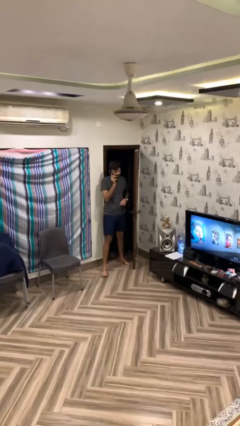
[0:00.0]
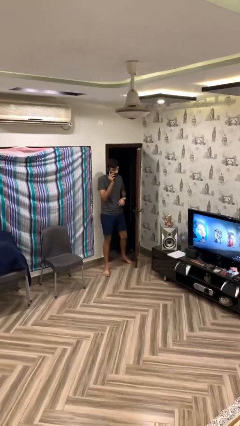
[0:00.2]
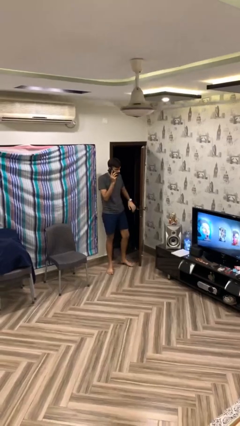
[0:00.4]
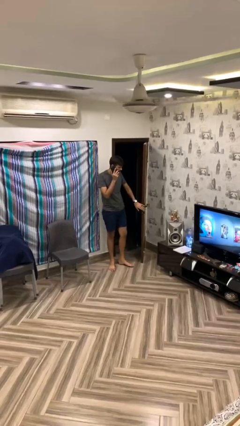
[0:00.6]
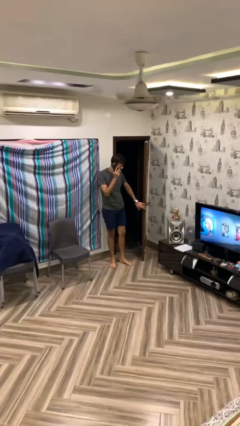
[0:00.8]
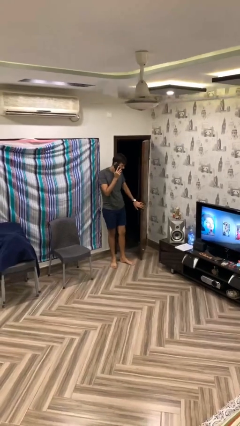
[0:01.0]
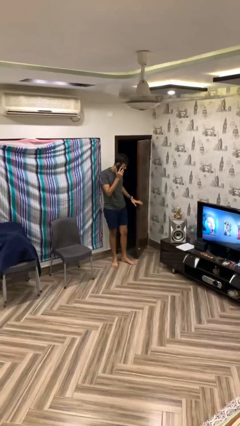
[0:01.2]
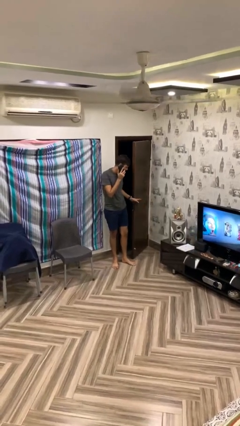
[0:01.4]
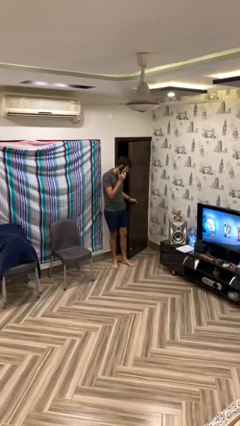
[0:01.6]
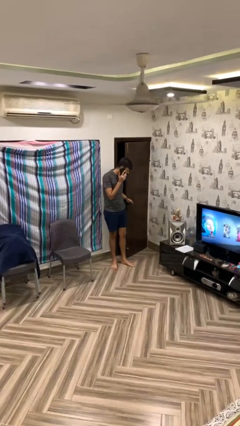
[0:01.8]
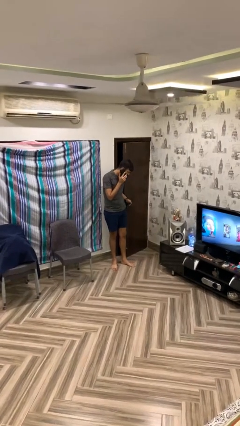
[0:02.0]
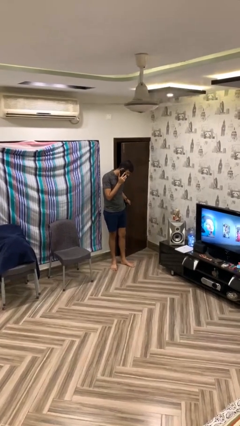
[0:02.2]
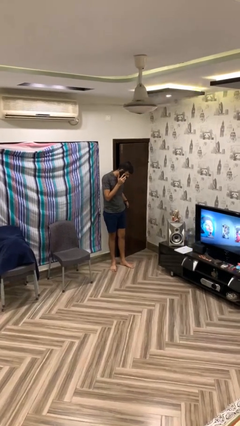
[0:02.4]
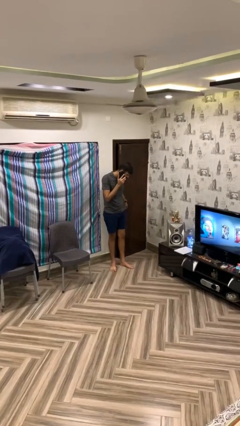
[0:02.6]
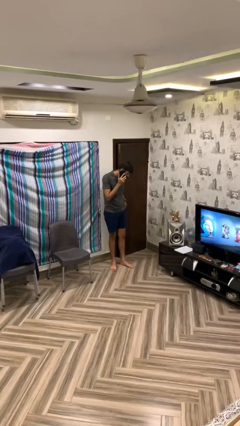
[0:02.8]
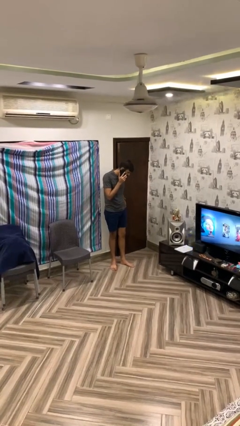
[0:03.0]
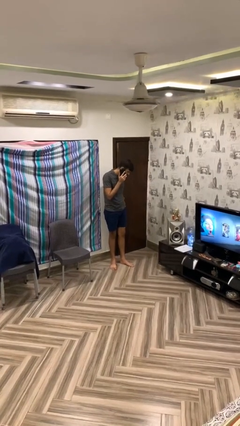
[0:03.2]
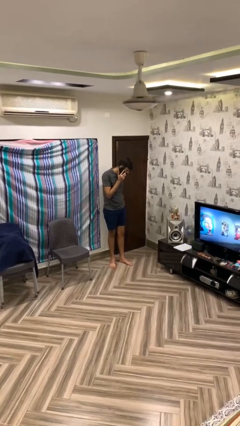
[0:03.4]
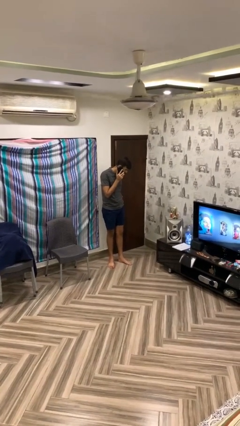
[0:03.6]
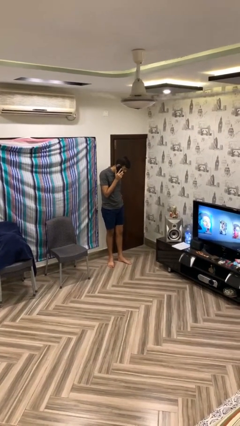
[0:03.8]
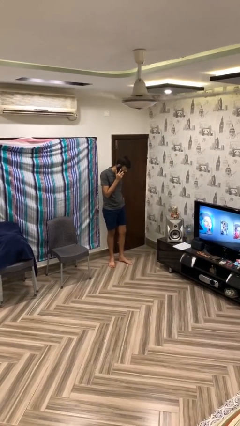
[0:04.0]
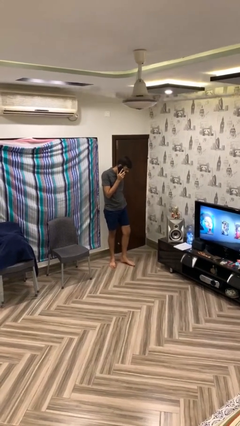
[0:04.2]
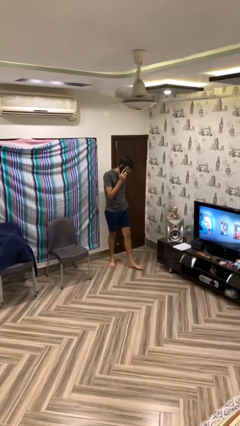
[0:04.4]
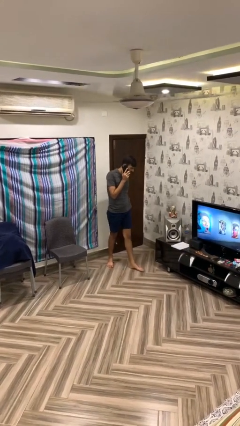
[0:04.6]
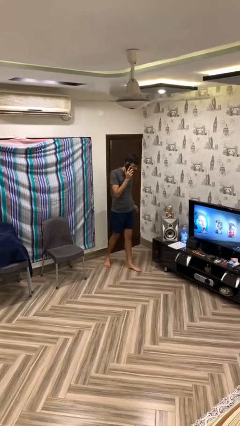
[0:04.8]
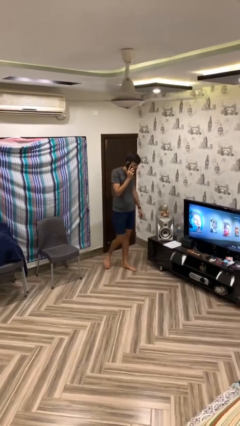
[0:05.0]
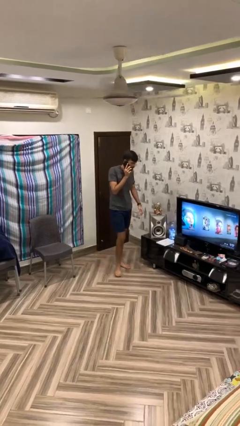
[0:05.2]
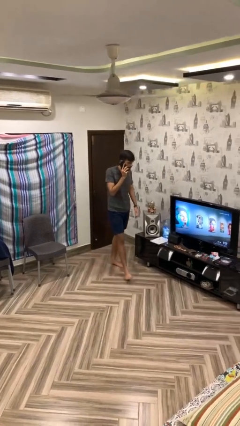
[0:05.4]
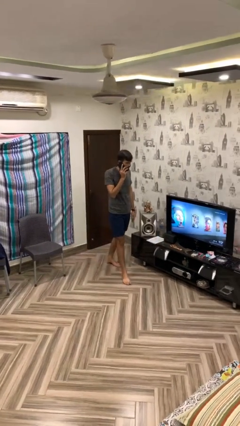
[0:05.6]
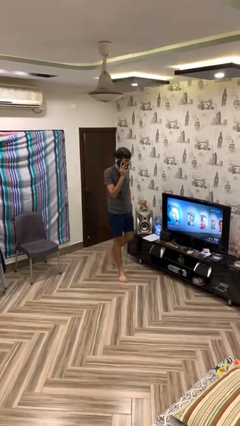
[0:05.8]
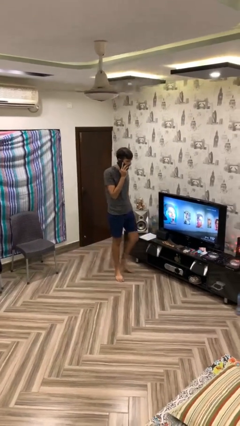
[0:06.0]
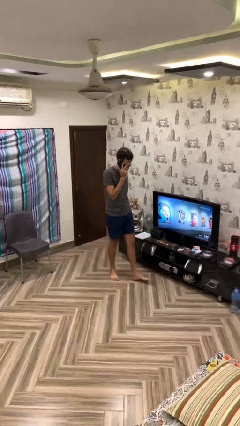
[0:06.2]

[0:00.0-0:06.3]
person closes facility door

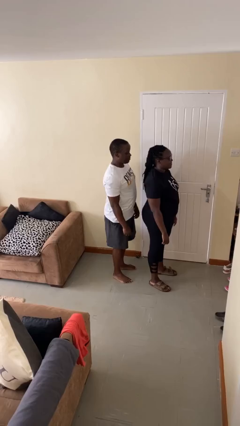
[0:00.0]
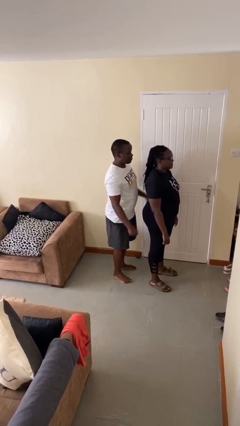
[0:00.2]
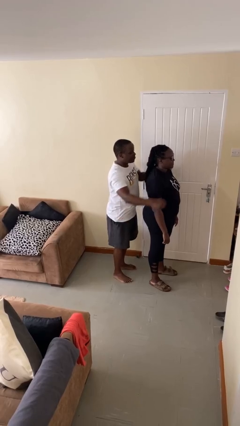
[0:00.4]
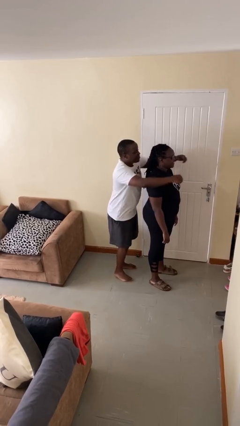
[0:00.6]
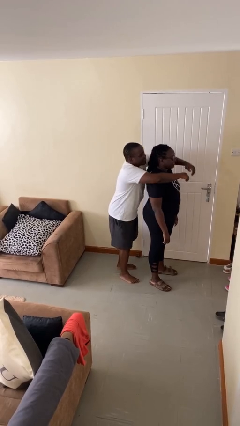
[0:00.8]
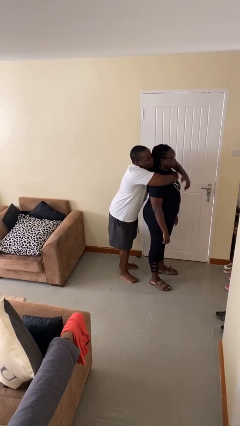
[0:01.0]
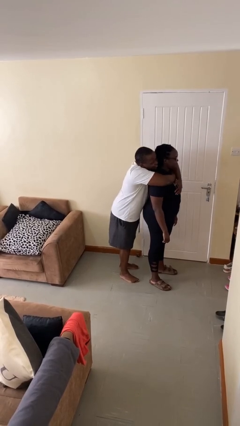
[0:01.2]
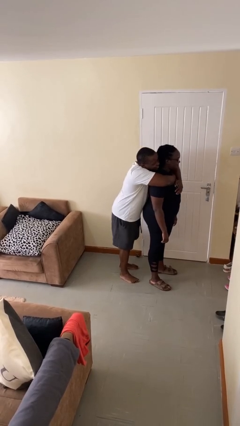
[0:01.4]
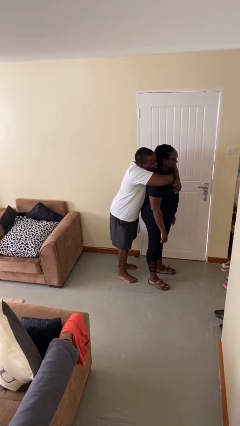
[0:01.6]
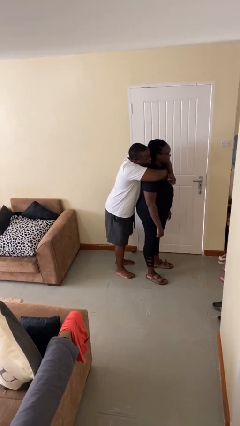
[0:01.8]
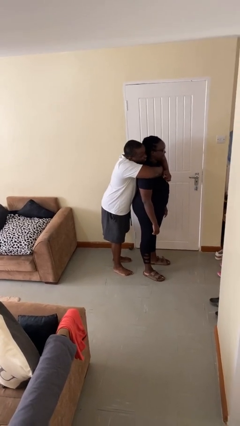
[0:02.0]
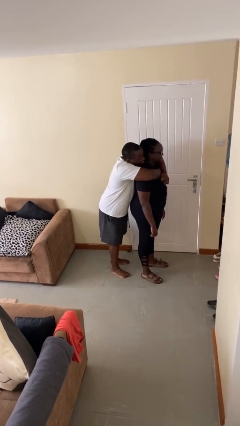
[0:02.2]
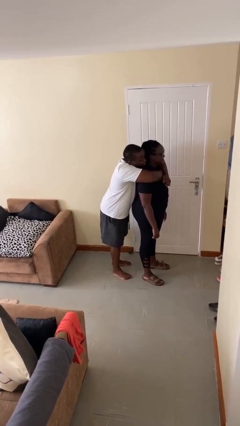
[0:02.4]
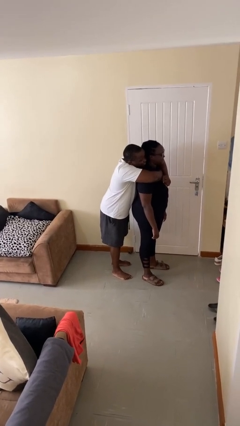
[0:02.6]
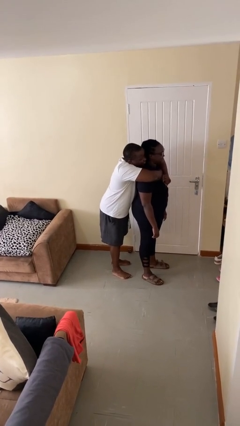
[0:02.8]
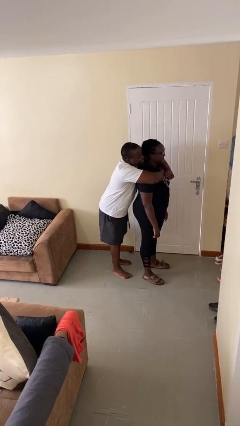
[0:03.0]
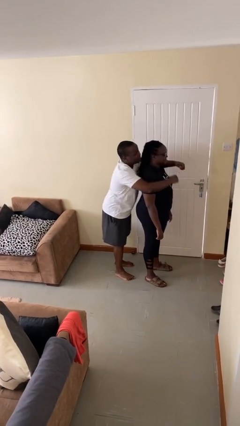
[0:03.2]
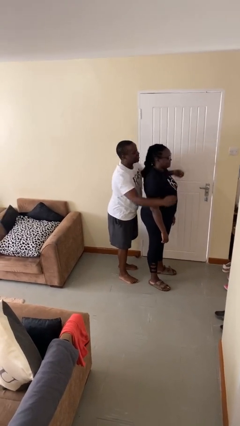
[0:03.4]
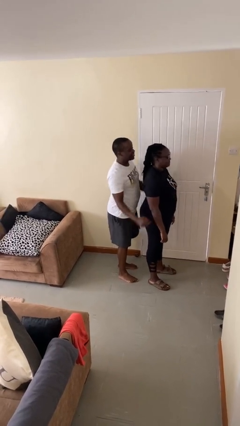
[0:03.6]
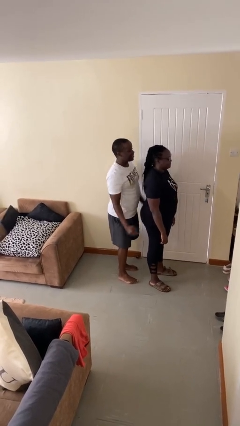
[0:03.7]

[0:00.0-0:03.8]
person hugs person from behind

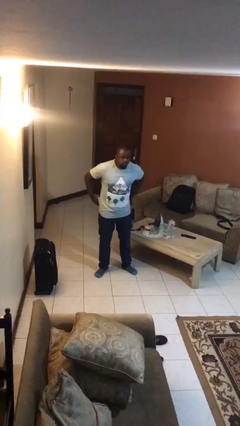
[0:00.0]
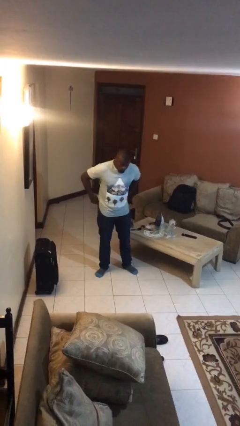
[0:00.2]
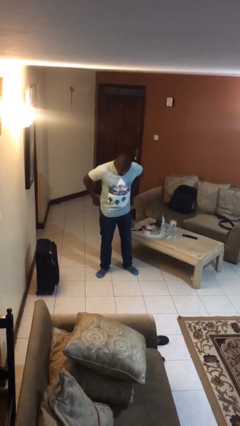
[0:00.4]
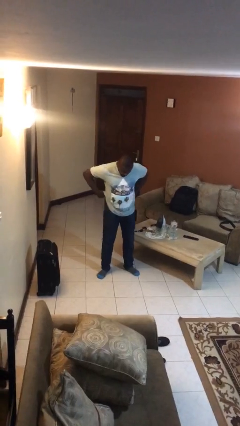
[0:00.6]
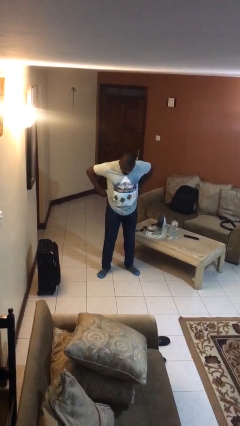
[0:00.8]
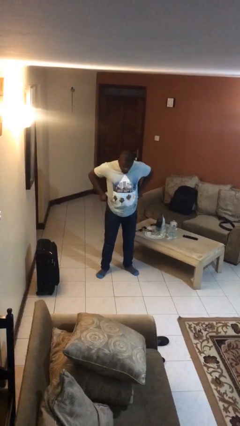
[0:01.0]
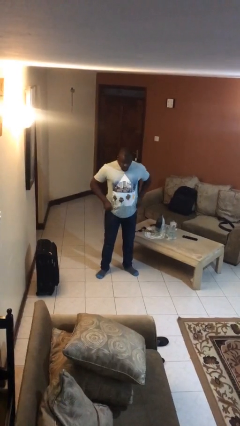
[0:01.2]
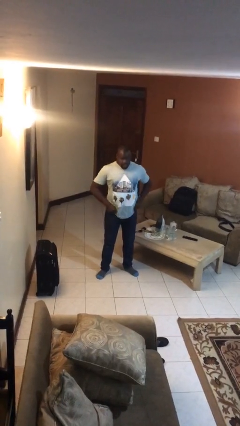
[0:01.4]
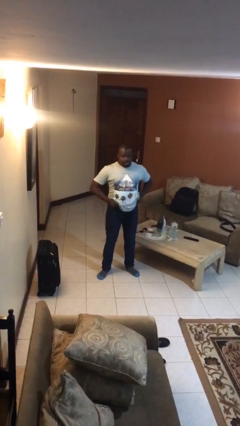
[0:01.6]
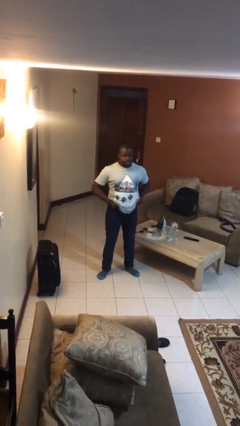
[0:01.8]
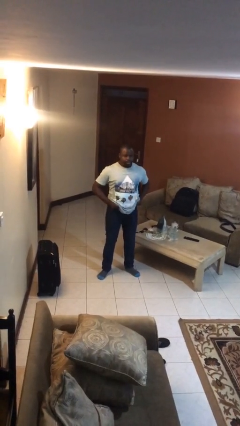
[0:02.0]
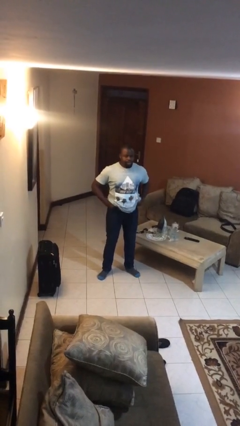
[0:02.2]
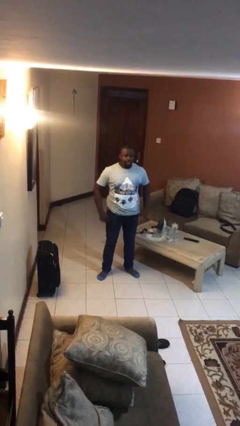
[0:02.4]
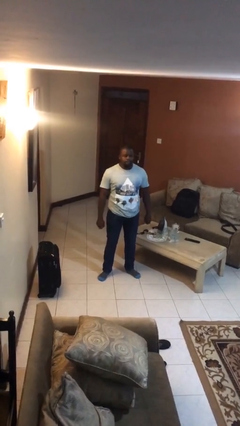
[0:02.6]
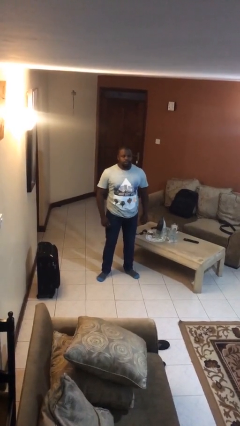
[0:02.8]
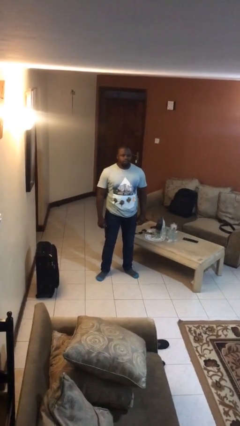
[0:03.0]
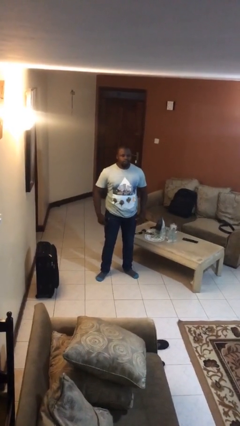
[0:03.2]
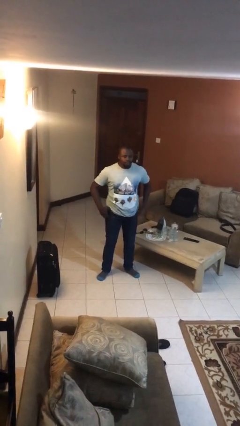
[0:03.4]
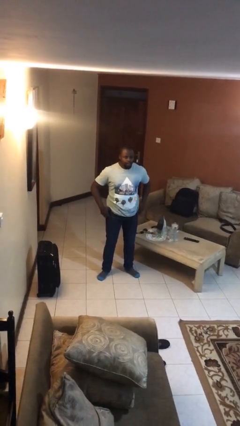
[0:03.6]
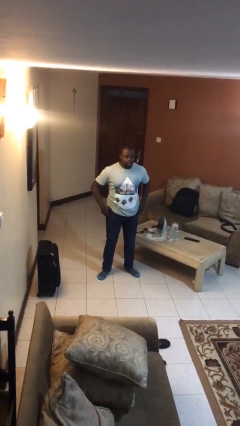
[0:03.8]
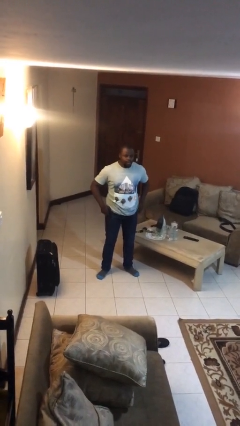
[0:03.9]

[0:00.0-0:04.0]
person hikes up pants

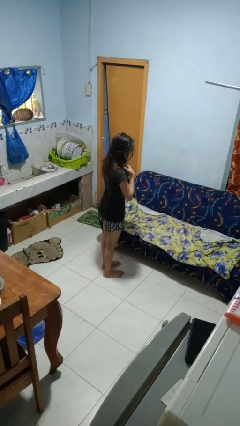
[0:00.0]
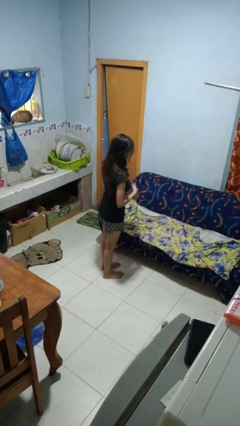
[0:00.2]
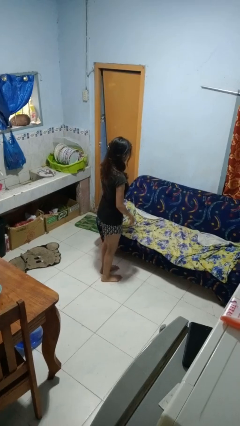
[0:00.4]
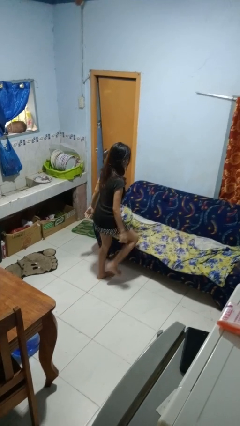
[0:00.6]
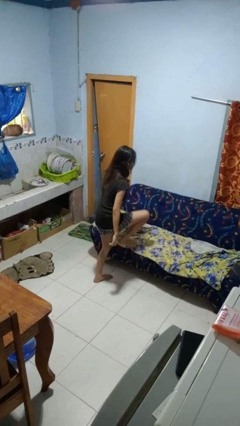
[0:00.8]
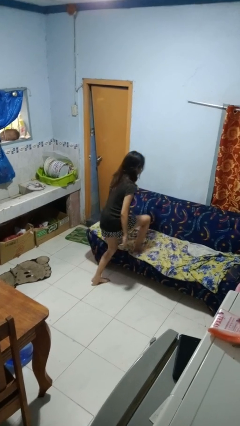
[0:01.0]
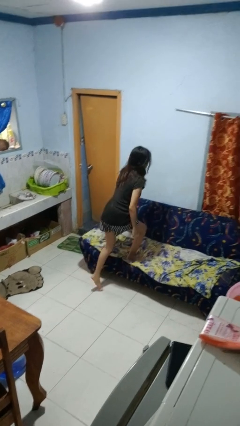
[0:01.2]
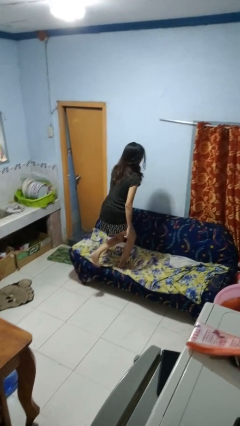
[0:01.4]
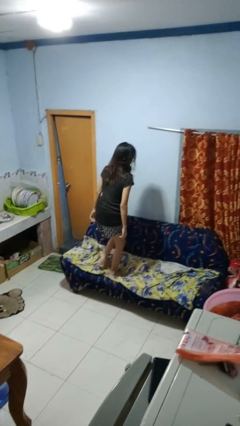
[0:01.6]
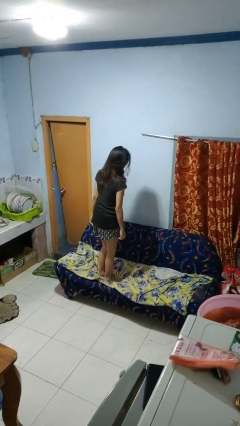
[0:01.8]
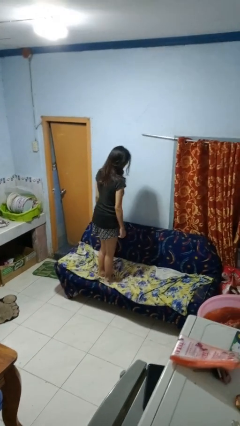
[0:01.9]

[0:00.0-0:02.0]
person climbs on couch

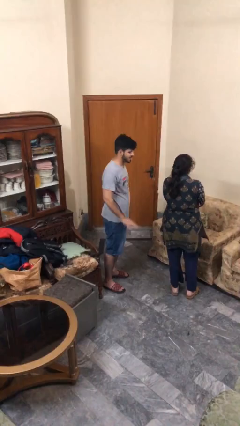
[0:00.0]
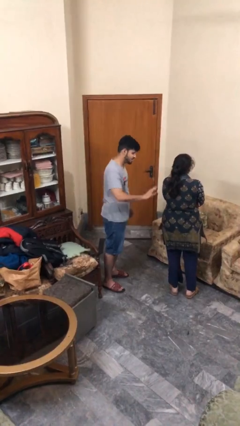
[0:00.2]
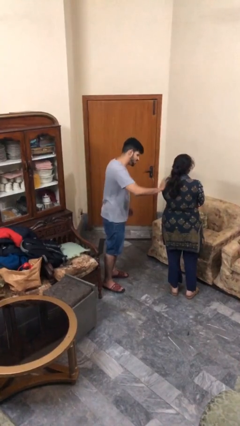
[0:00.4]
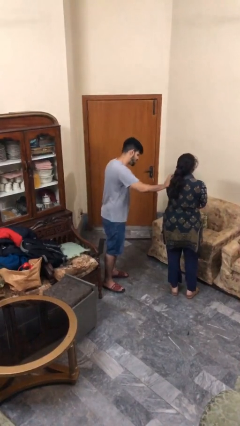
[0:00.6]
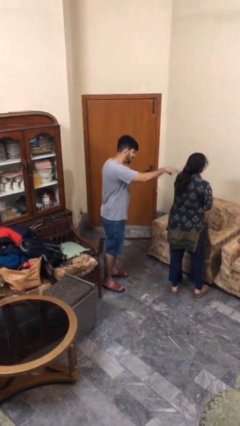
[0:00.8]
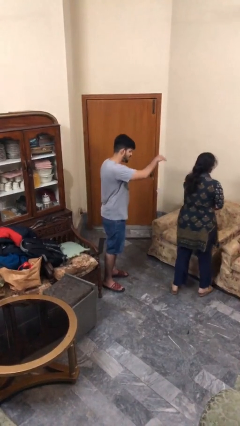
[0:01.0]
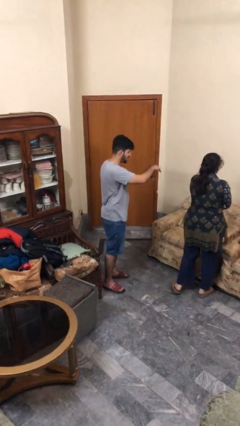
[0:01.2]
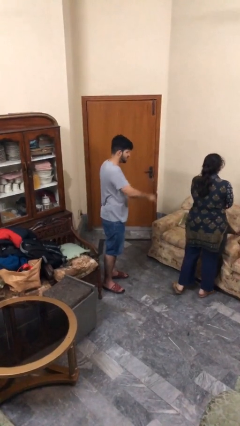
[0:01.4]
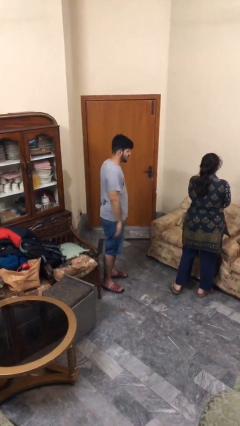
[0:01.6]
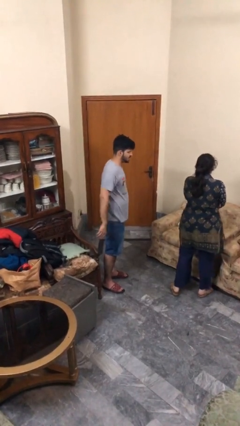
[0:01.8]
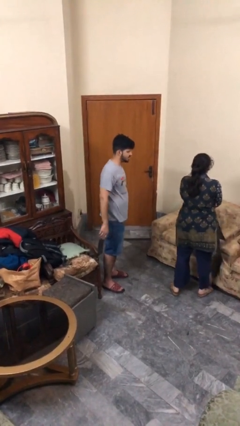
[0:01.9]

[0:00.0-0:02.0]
person shoves person
